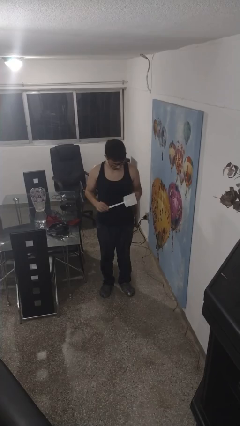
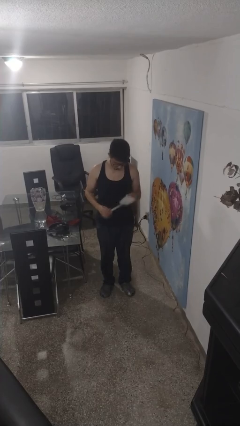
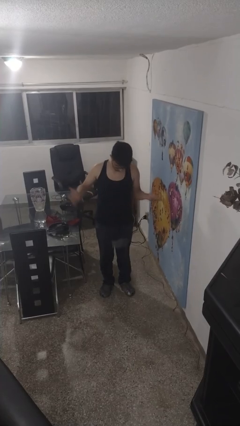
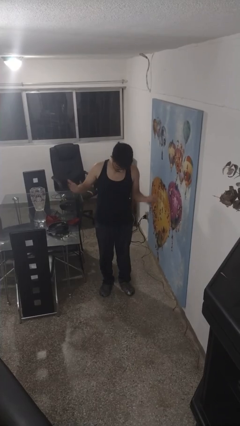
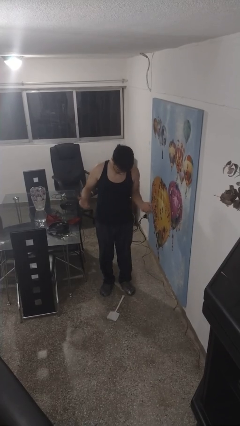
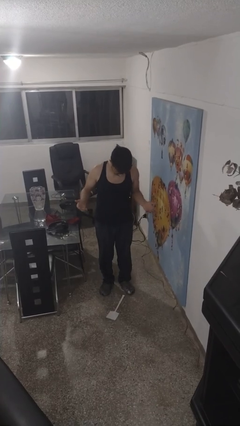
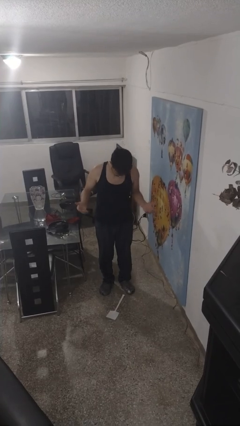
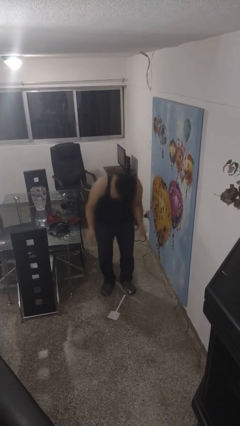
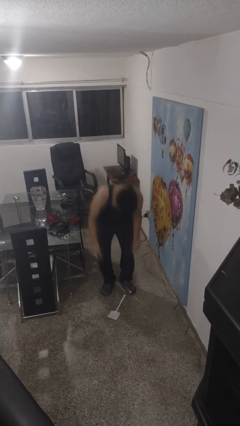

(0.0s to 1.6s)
person drops object

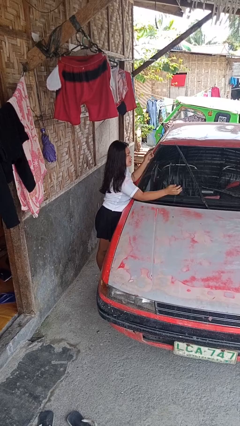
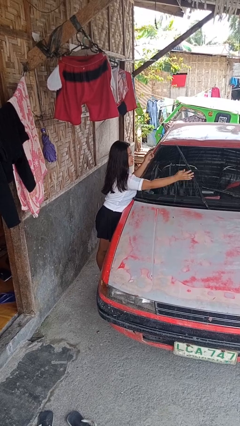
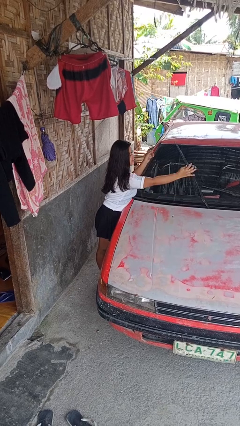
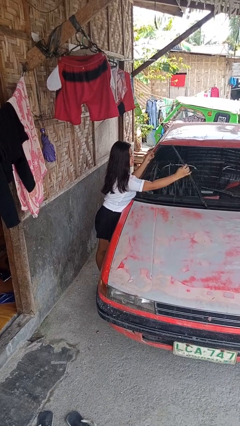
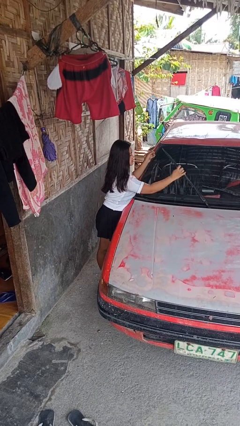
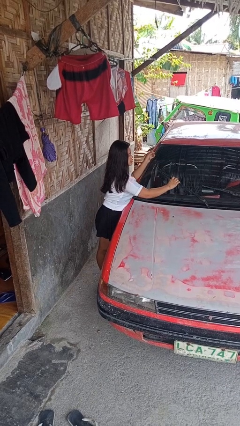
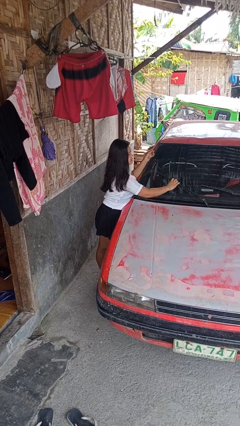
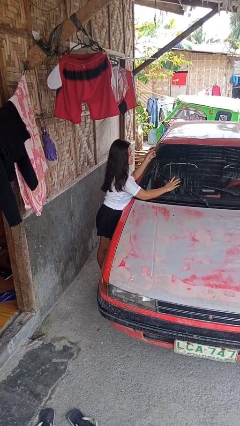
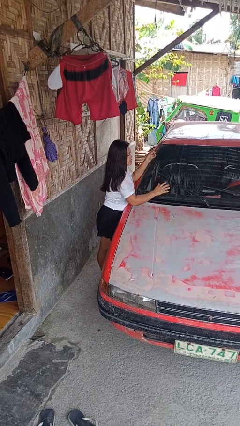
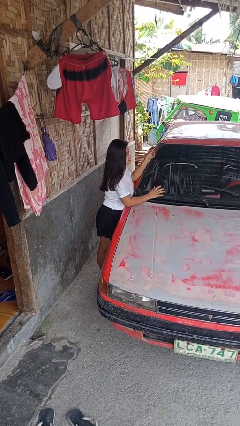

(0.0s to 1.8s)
person flips down car wipers

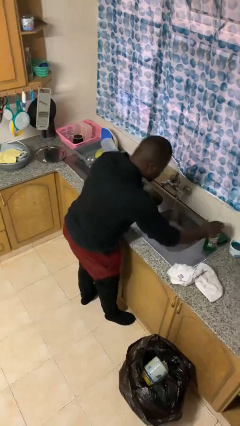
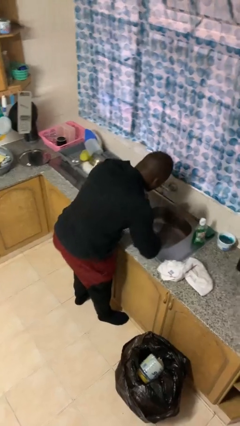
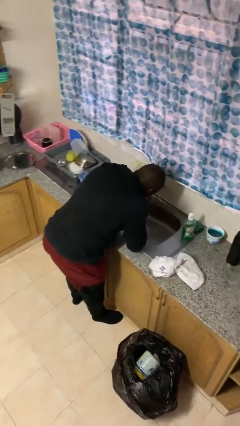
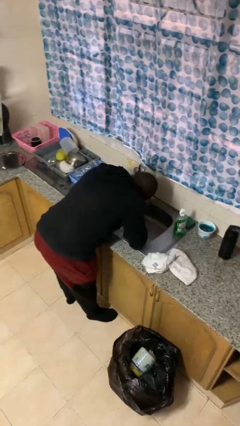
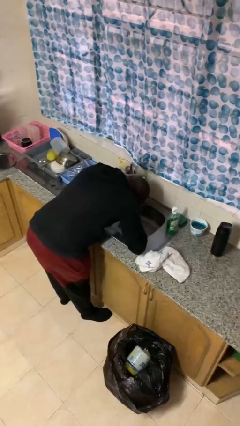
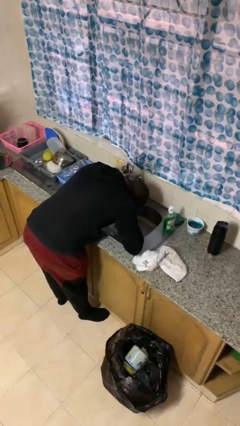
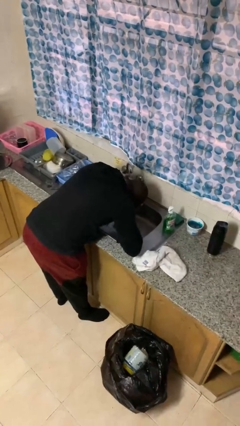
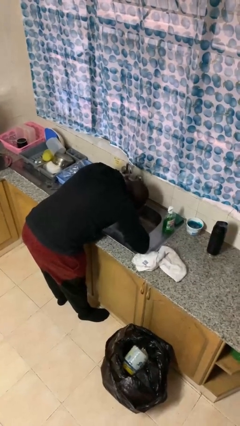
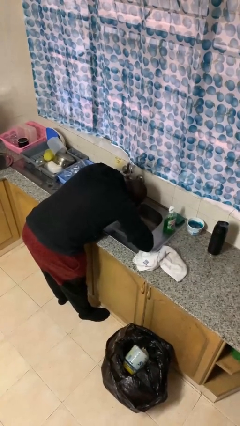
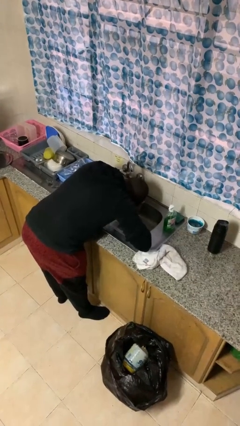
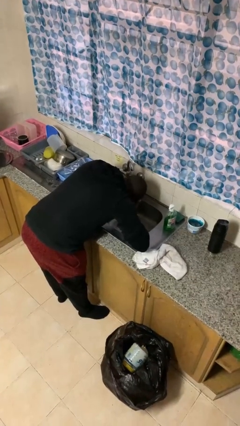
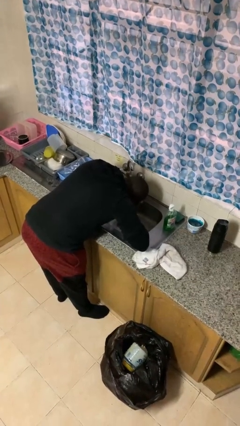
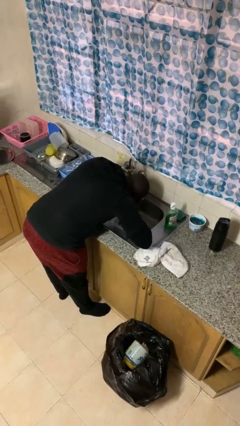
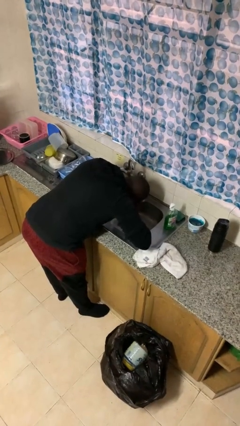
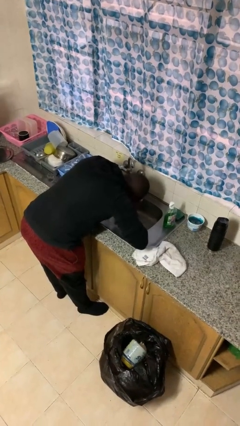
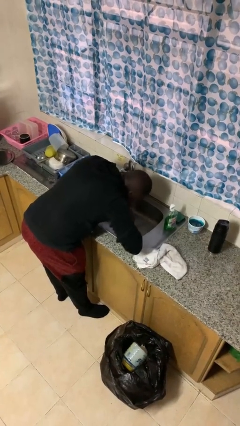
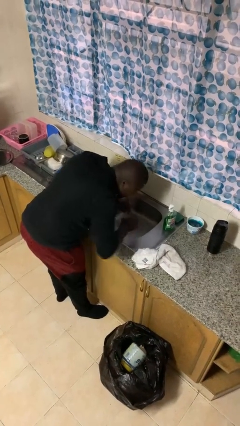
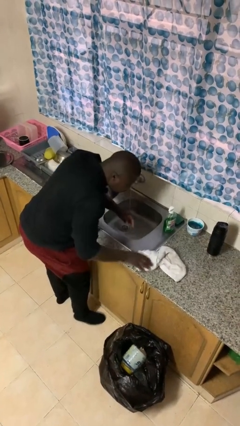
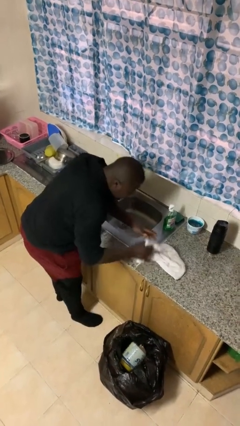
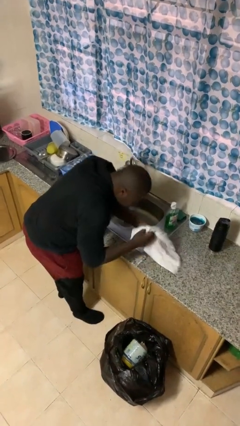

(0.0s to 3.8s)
person washes face

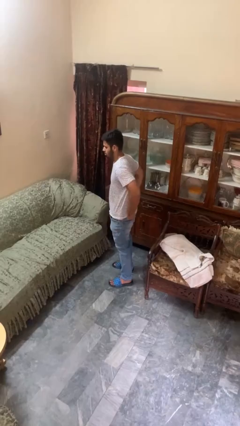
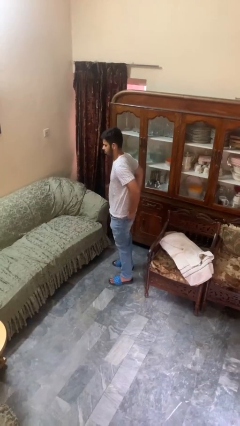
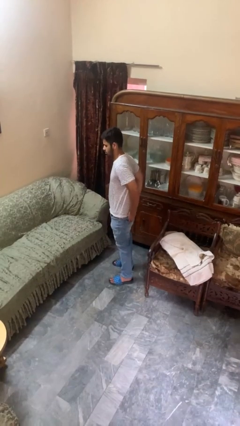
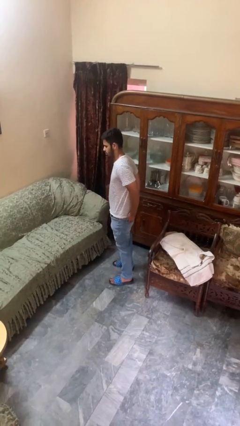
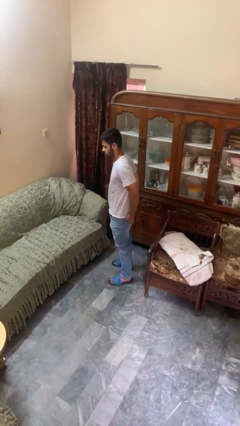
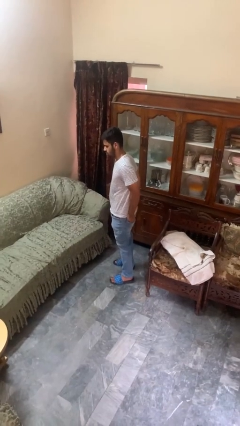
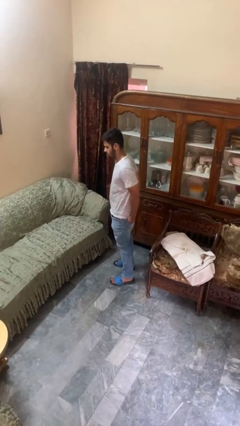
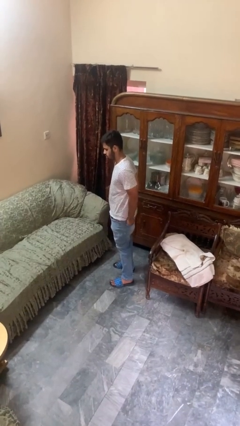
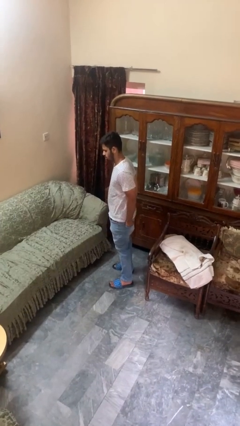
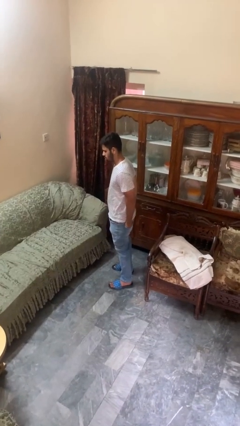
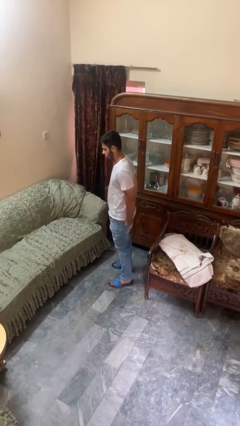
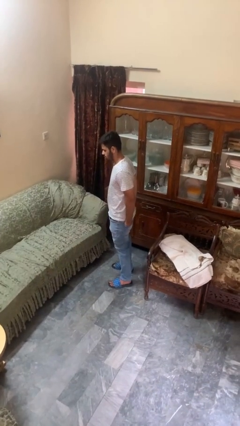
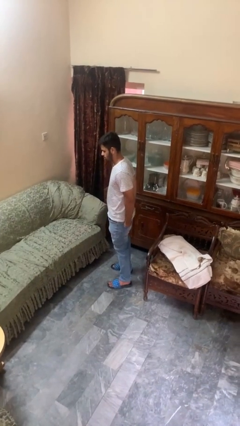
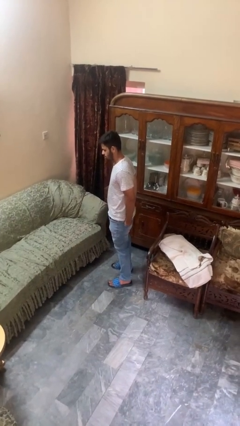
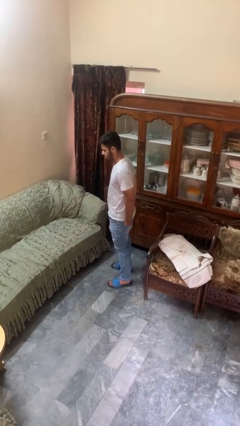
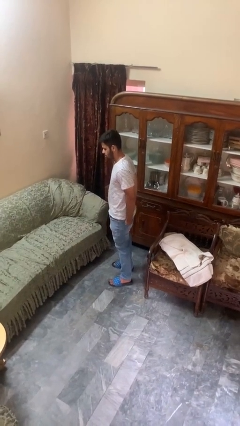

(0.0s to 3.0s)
person puts hands in back pockets

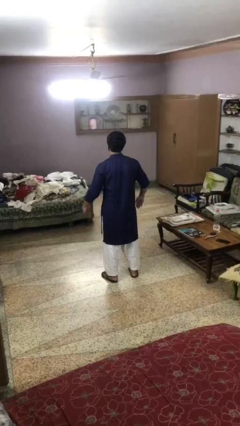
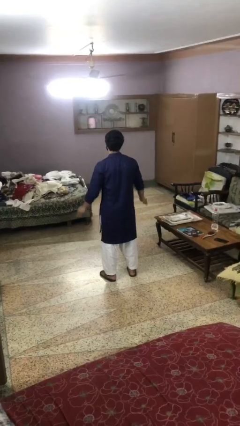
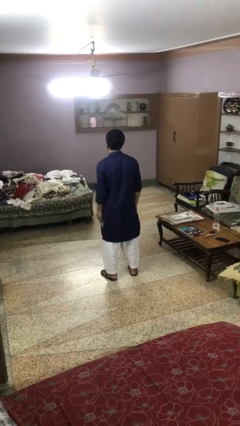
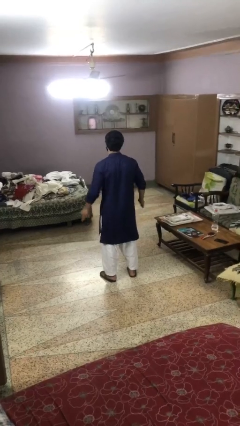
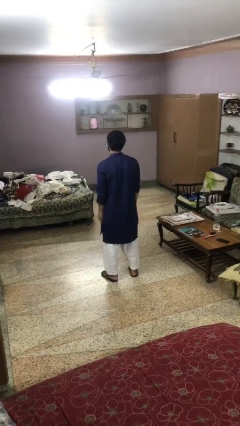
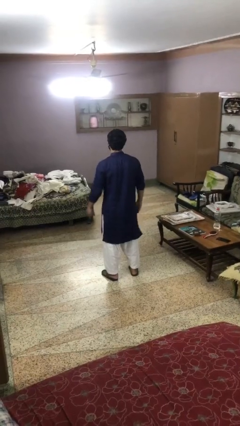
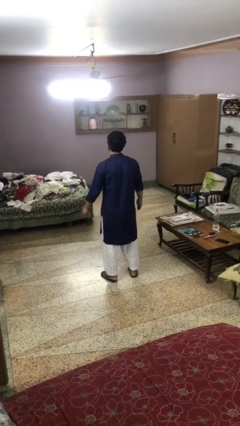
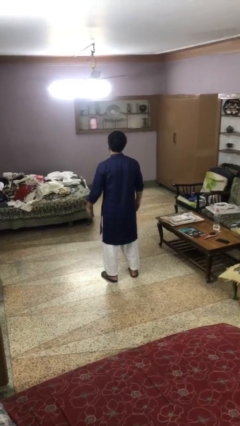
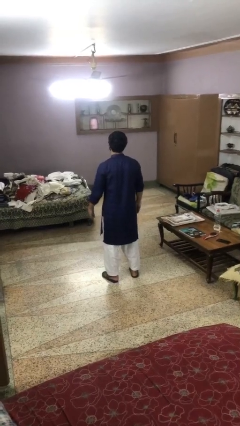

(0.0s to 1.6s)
person slaps hands on thighs

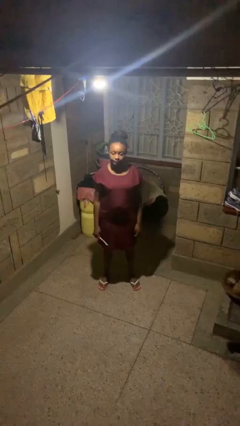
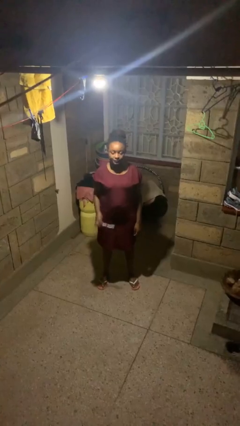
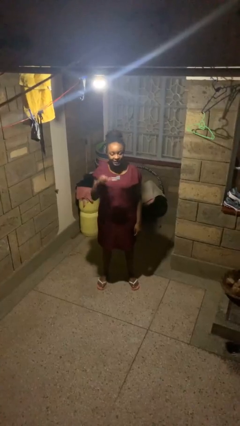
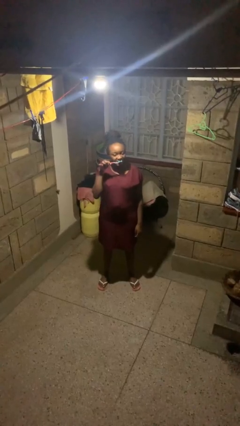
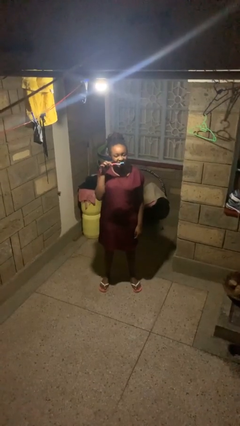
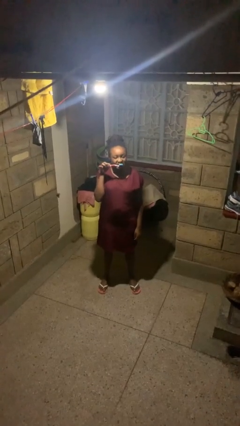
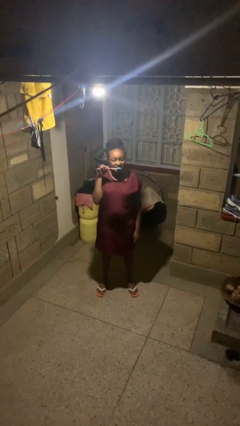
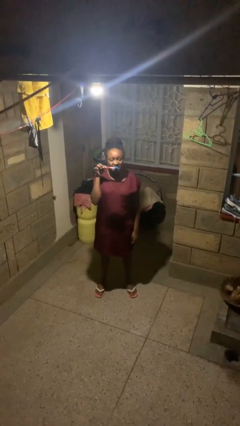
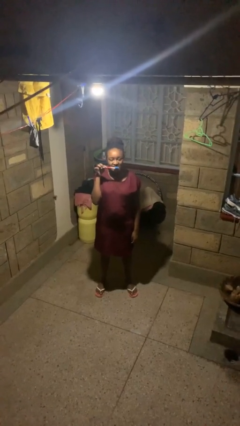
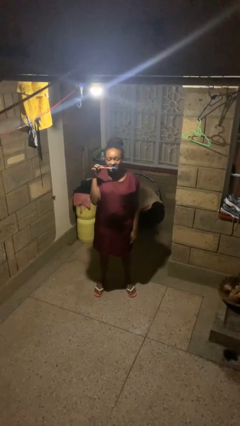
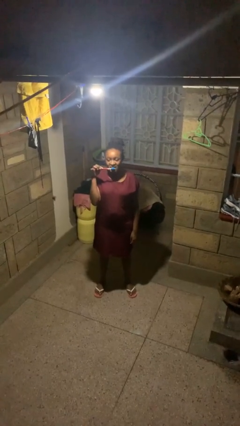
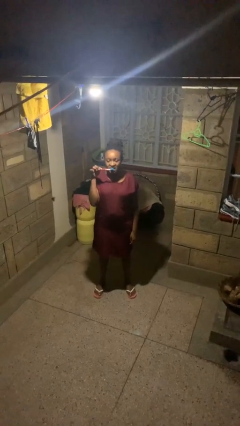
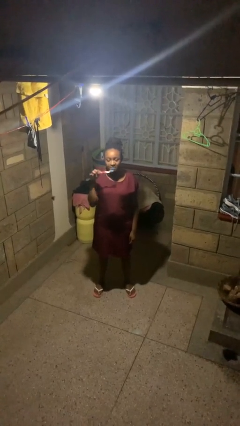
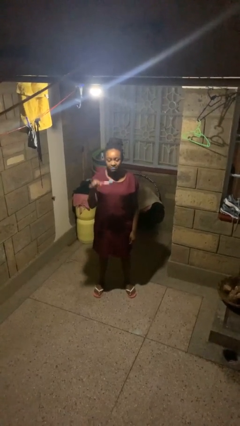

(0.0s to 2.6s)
person brushes teeth

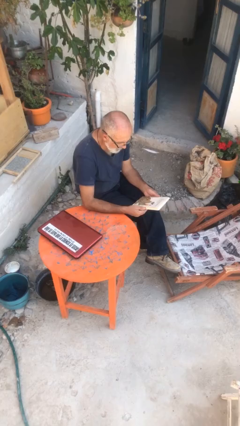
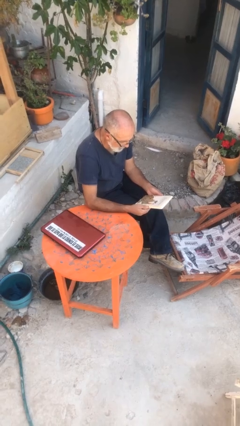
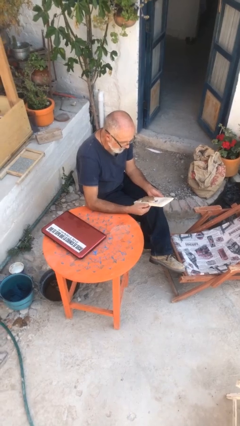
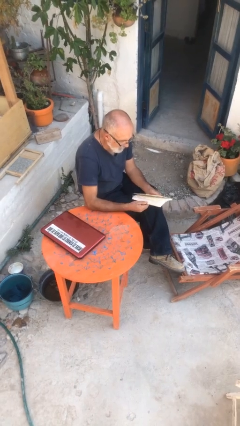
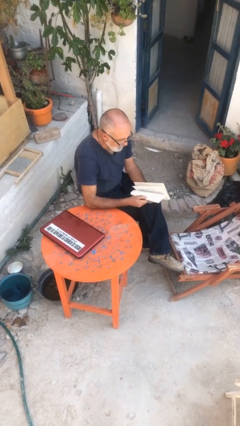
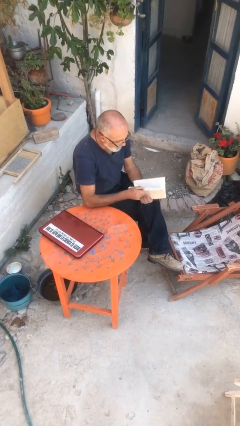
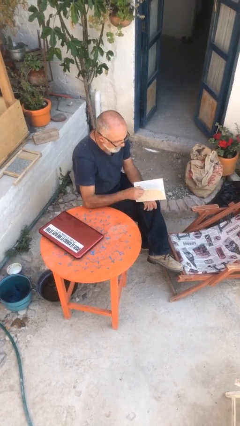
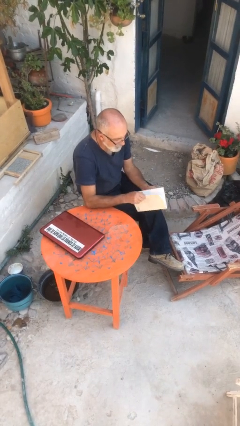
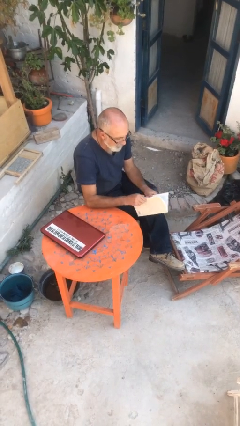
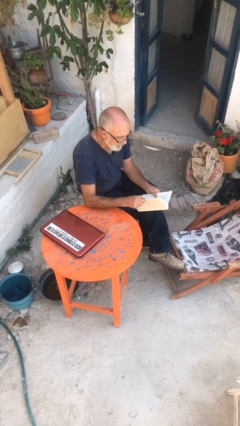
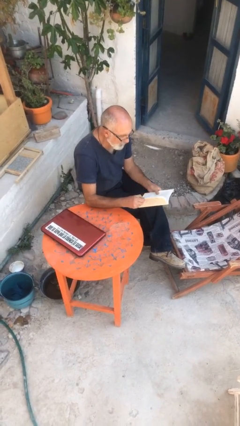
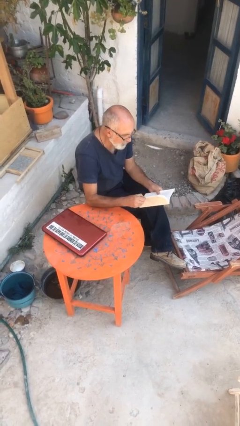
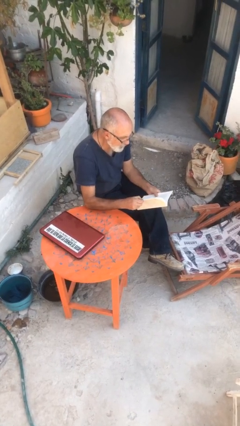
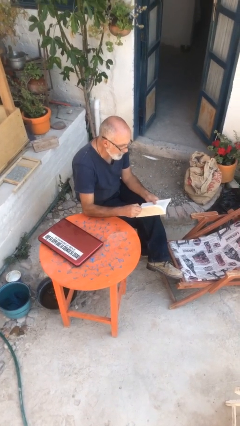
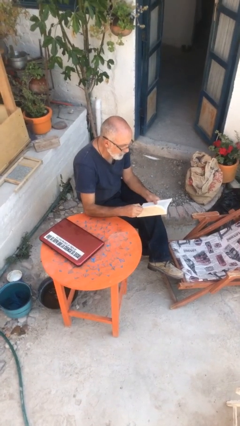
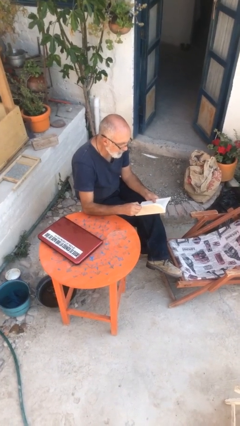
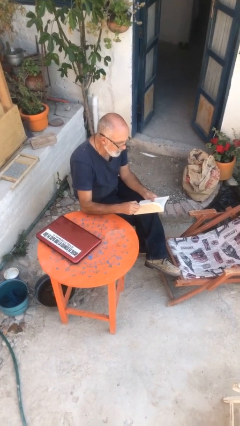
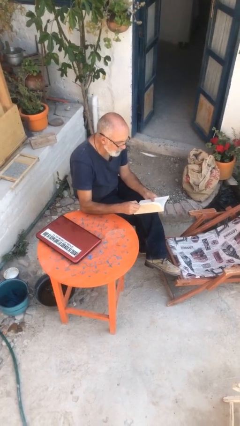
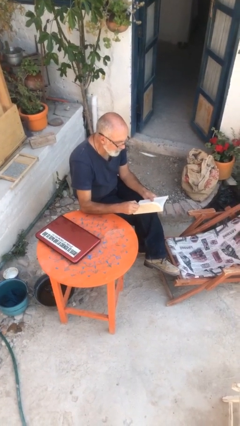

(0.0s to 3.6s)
person reads document
